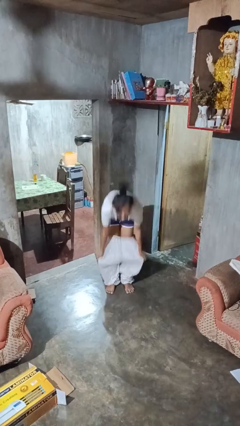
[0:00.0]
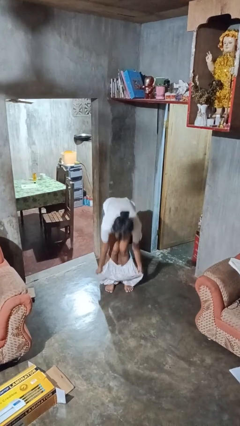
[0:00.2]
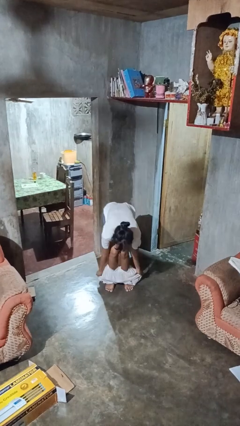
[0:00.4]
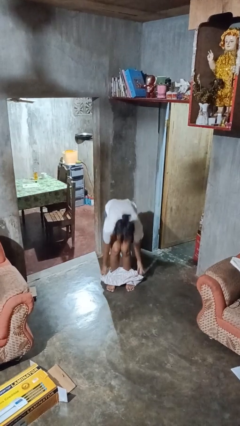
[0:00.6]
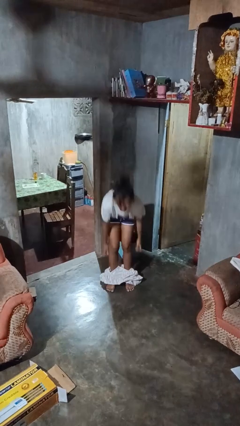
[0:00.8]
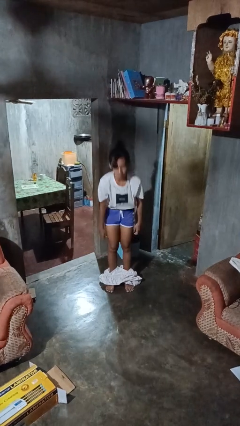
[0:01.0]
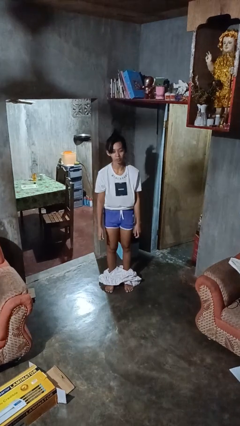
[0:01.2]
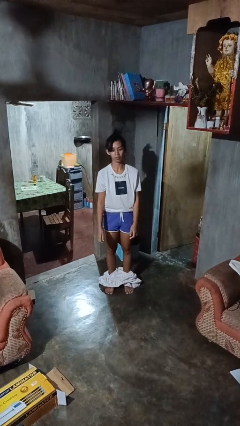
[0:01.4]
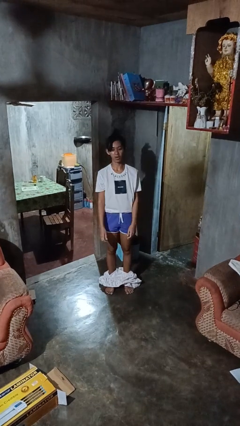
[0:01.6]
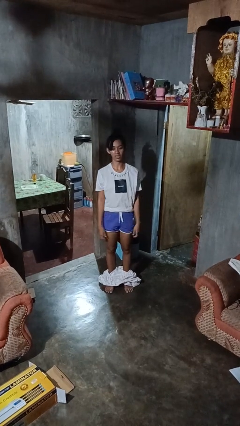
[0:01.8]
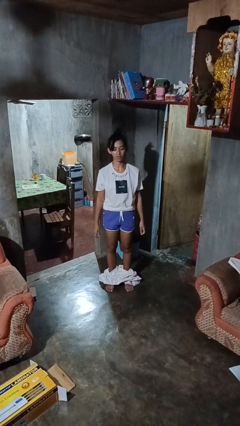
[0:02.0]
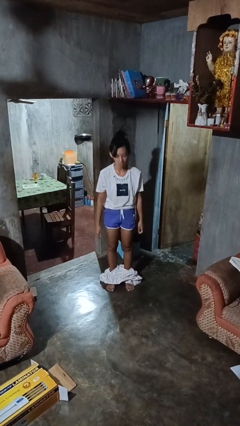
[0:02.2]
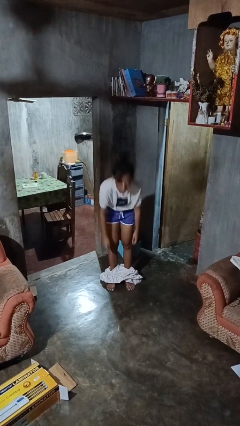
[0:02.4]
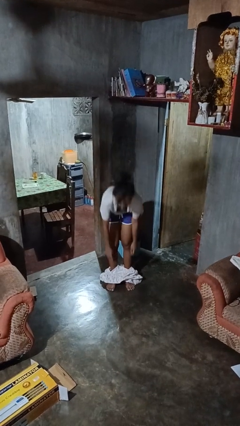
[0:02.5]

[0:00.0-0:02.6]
person takes off pants

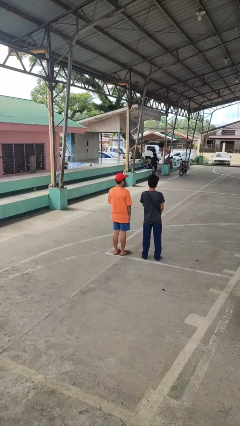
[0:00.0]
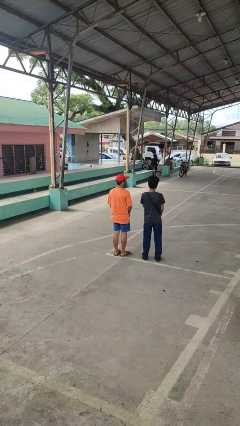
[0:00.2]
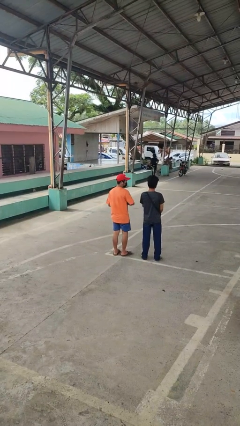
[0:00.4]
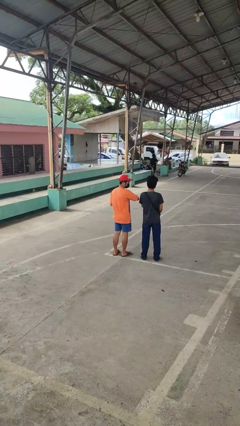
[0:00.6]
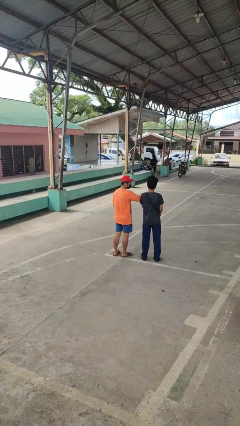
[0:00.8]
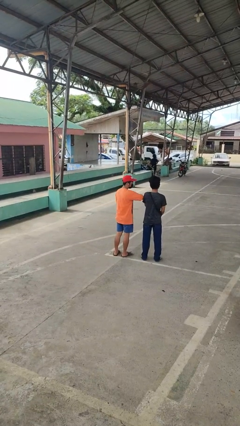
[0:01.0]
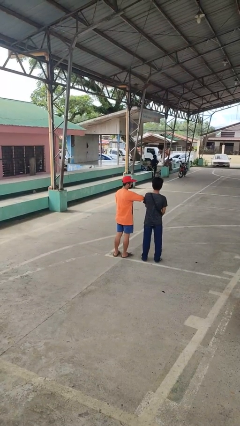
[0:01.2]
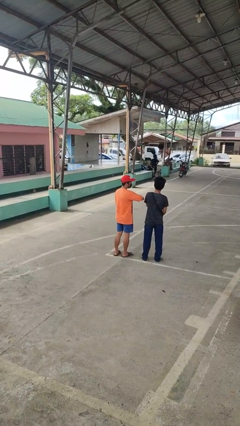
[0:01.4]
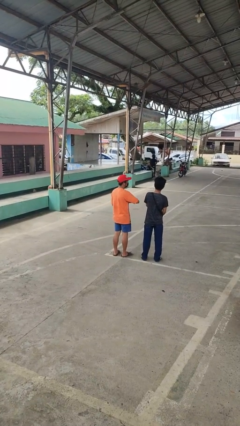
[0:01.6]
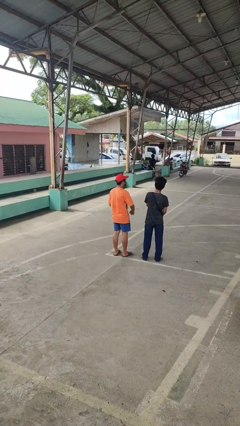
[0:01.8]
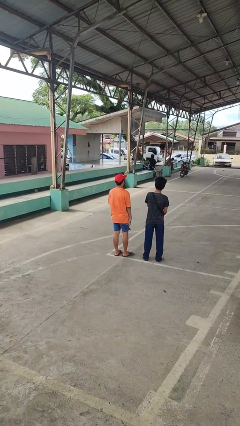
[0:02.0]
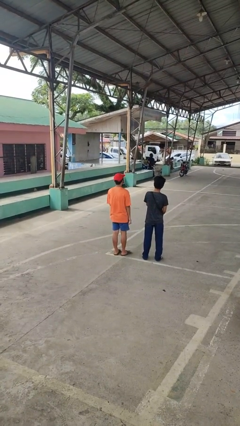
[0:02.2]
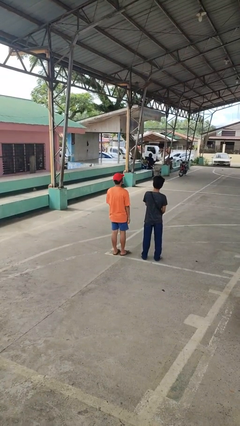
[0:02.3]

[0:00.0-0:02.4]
person nudges person with elbow

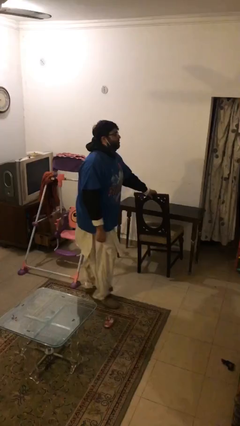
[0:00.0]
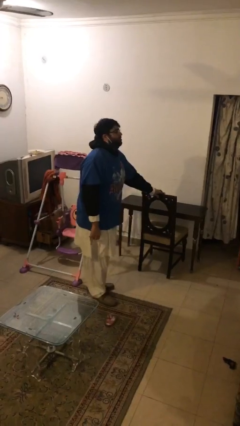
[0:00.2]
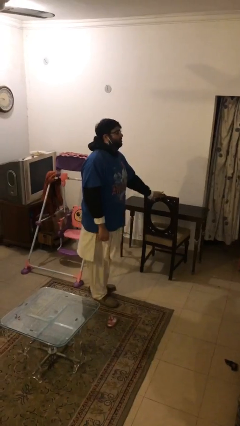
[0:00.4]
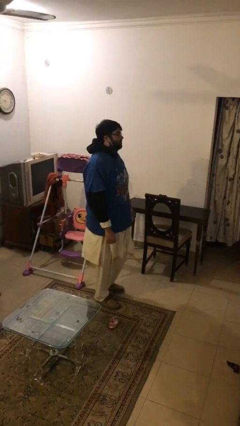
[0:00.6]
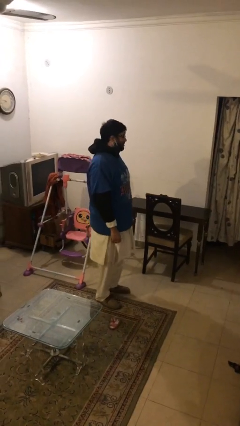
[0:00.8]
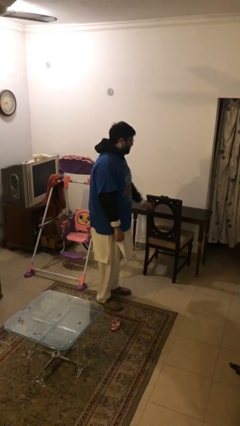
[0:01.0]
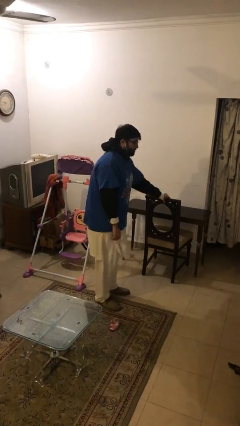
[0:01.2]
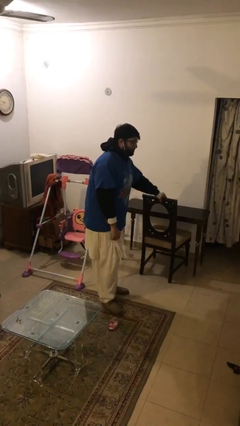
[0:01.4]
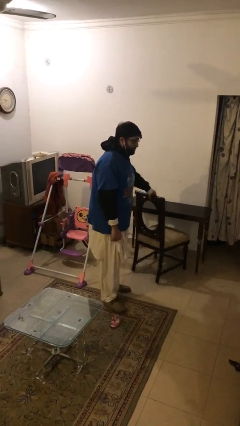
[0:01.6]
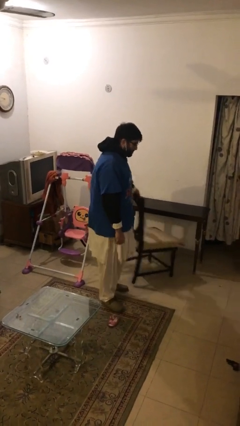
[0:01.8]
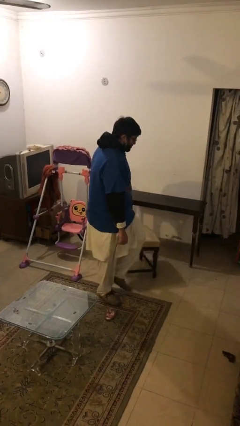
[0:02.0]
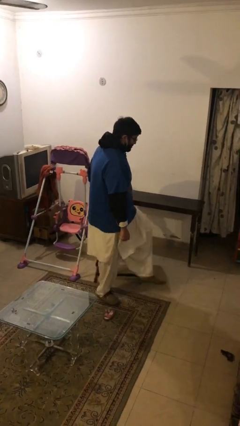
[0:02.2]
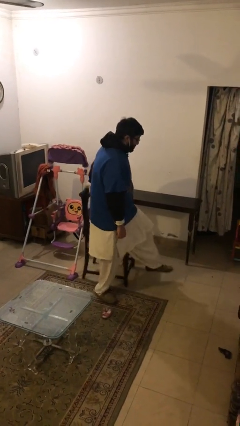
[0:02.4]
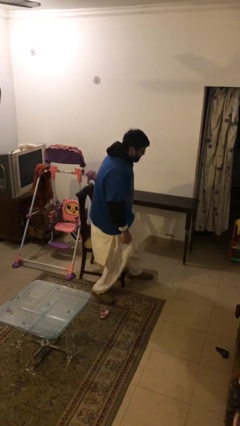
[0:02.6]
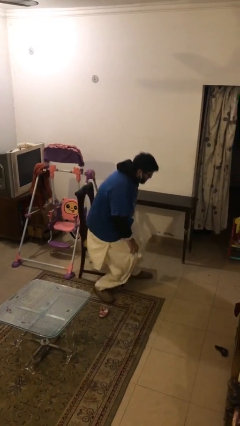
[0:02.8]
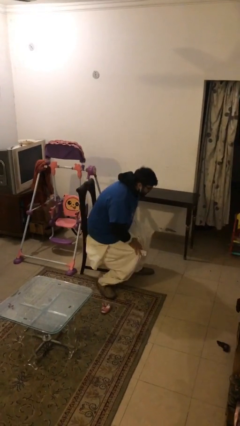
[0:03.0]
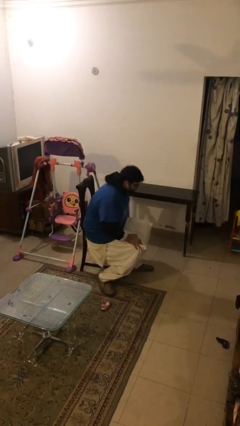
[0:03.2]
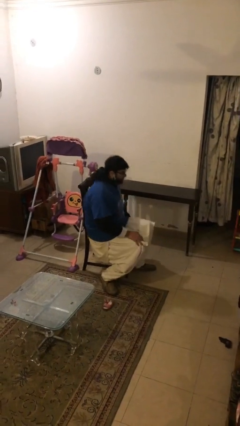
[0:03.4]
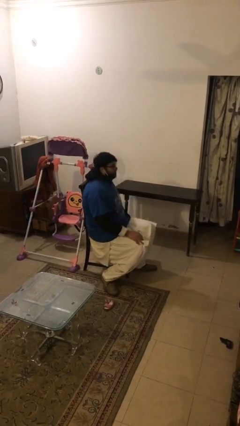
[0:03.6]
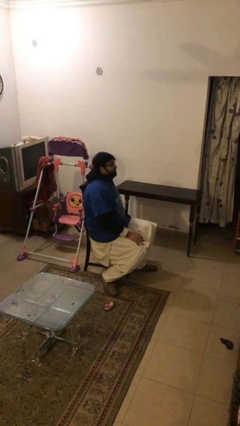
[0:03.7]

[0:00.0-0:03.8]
person sits down

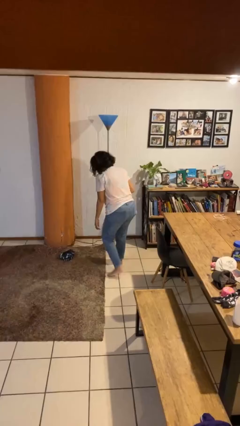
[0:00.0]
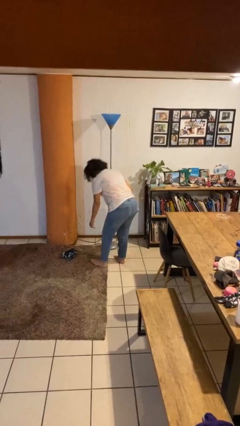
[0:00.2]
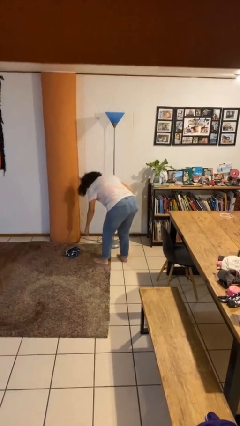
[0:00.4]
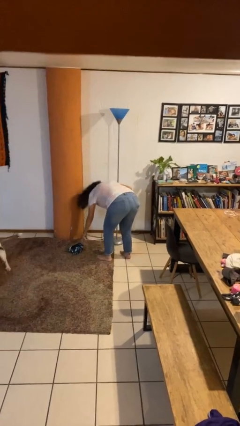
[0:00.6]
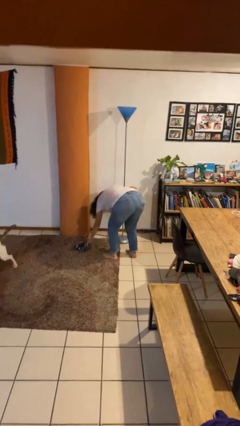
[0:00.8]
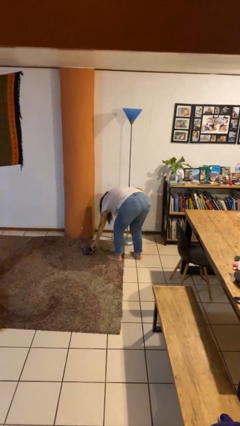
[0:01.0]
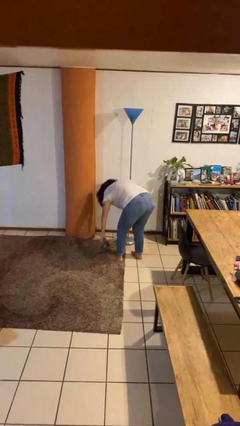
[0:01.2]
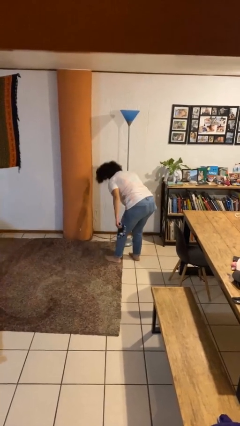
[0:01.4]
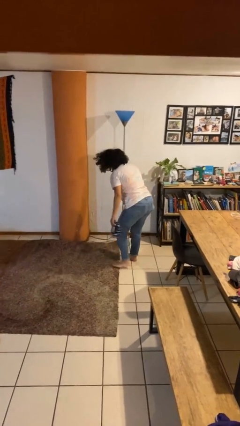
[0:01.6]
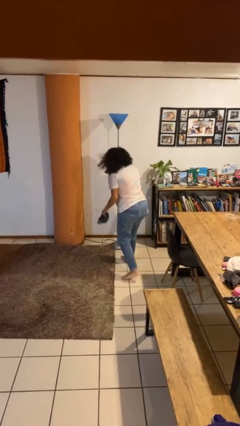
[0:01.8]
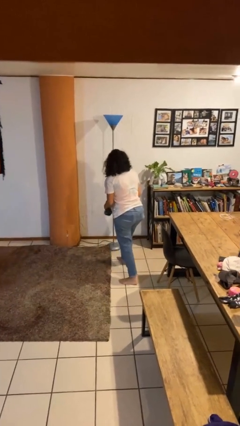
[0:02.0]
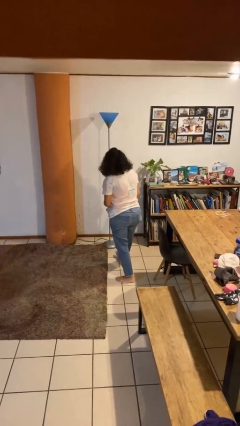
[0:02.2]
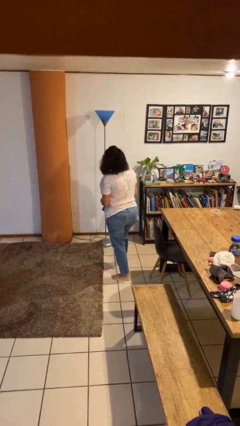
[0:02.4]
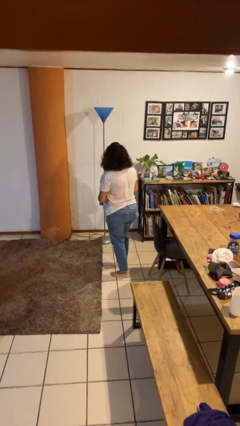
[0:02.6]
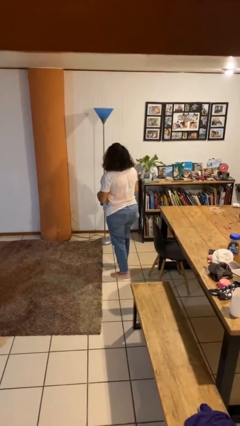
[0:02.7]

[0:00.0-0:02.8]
person picks up object from floor

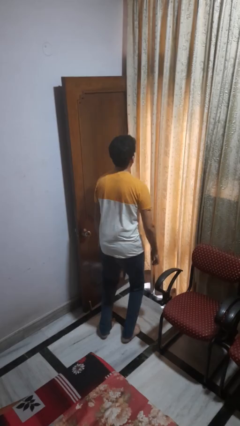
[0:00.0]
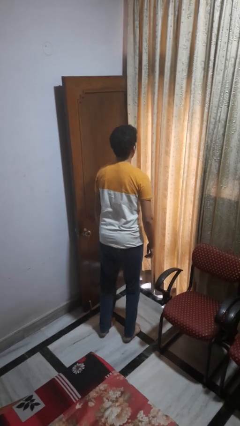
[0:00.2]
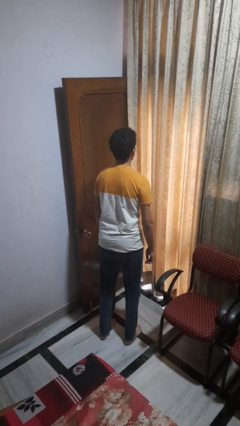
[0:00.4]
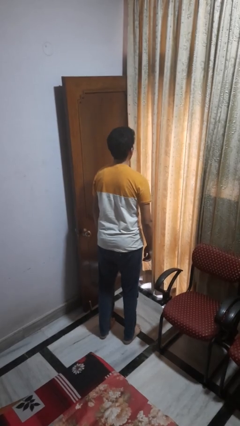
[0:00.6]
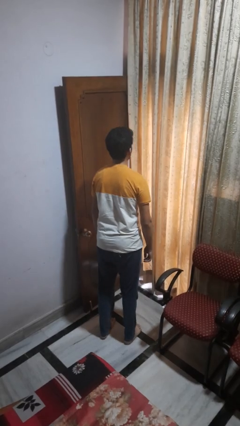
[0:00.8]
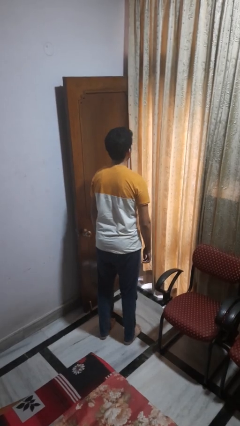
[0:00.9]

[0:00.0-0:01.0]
person jumps

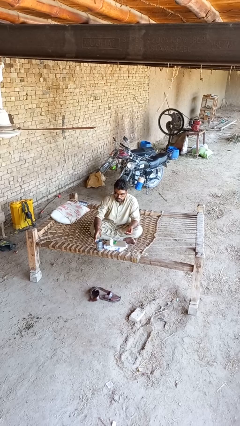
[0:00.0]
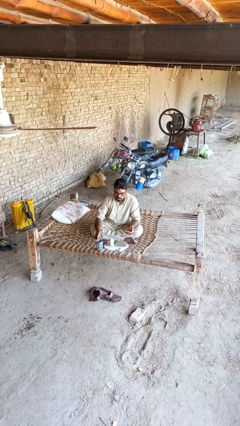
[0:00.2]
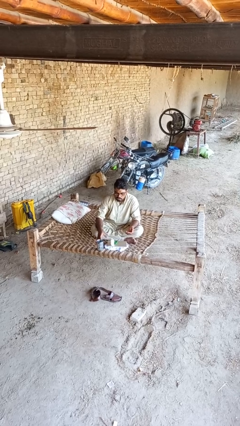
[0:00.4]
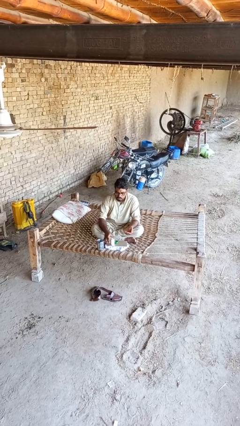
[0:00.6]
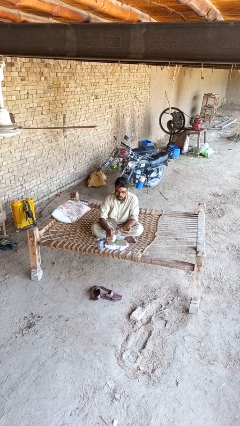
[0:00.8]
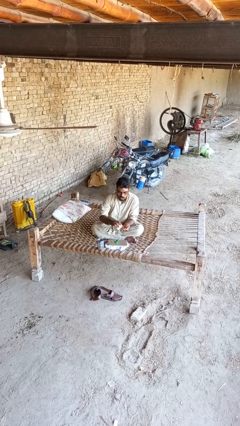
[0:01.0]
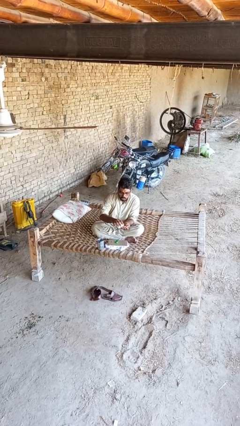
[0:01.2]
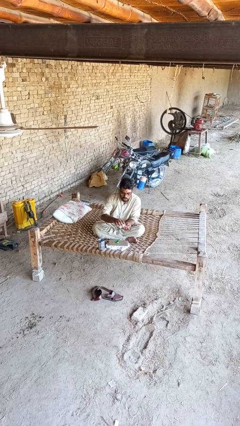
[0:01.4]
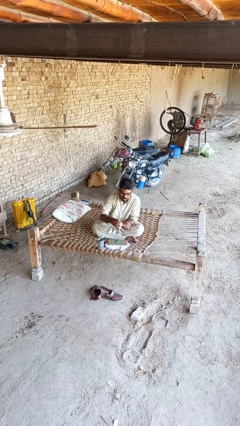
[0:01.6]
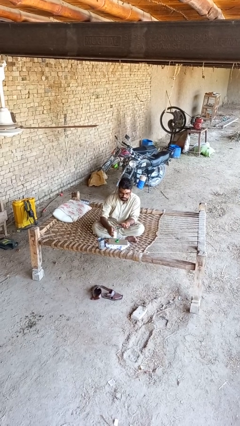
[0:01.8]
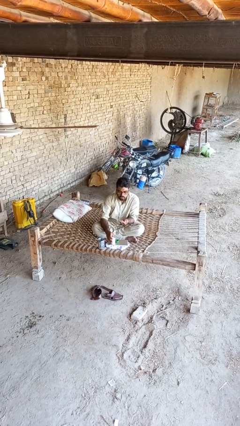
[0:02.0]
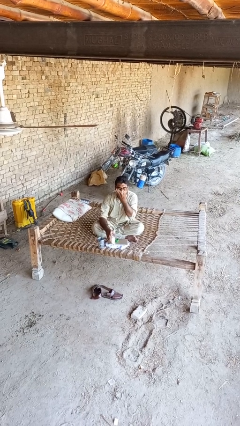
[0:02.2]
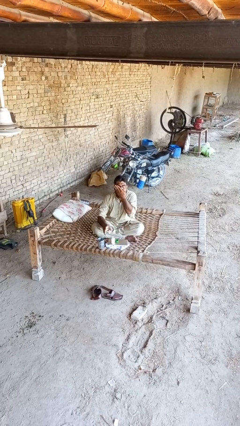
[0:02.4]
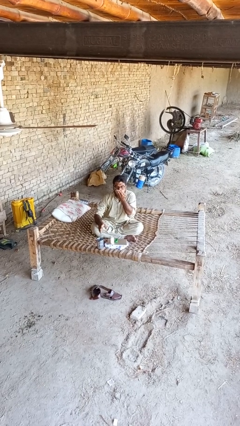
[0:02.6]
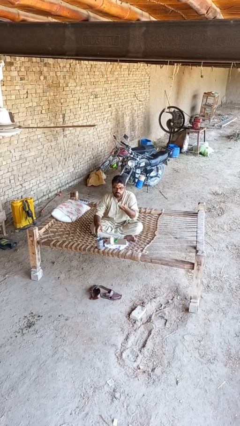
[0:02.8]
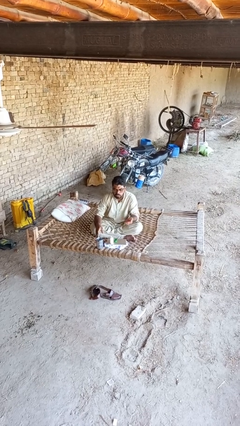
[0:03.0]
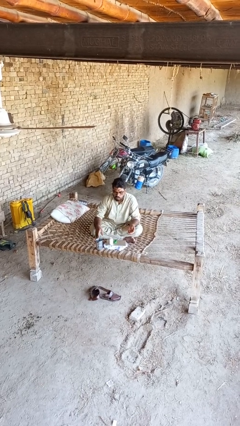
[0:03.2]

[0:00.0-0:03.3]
person takes medicine pills

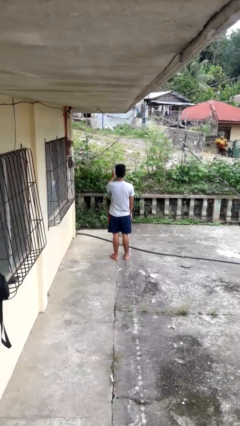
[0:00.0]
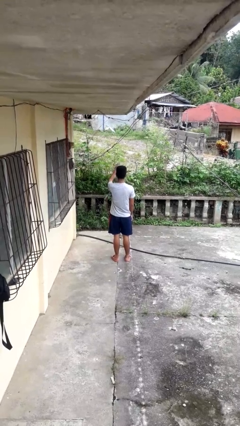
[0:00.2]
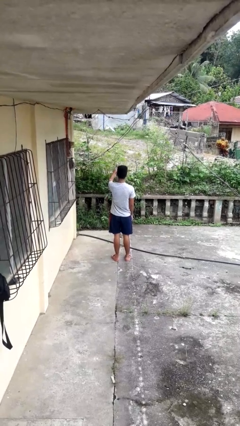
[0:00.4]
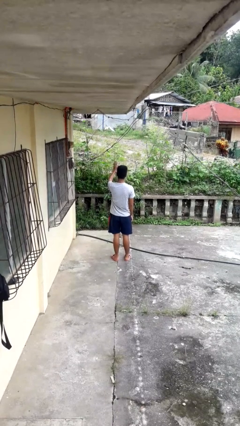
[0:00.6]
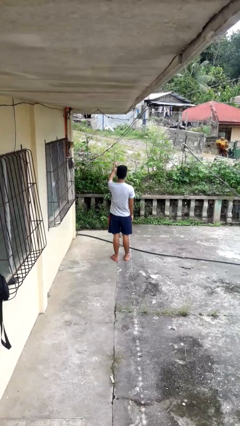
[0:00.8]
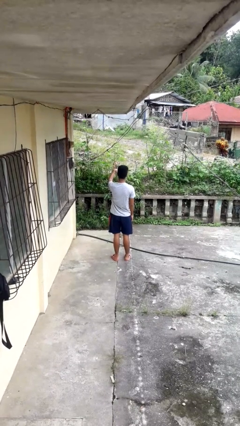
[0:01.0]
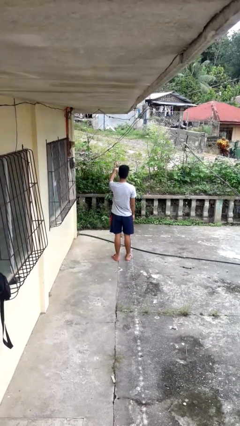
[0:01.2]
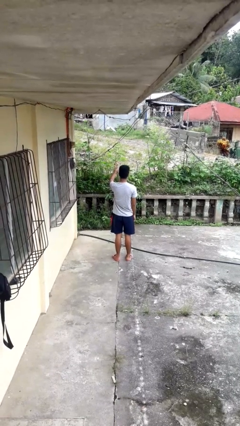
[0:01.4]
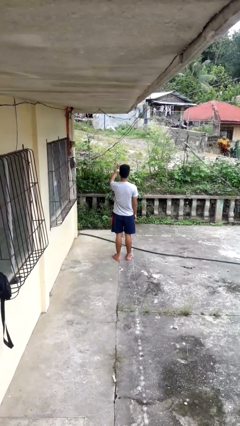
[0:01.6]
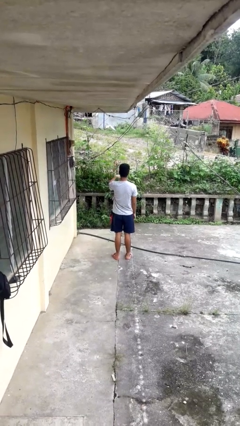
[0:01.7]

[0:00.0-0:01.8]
person gestures come here
